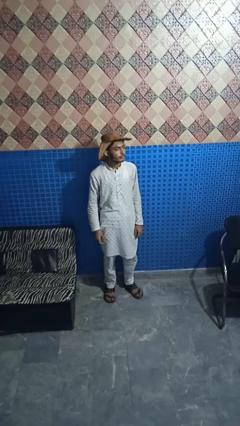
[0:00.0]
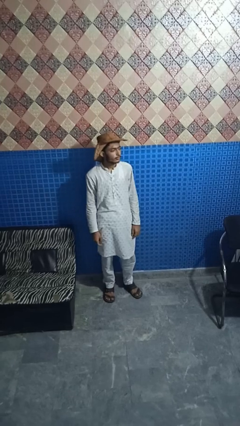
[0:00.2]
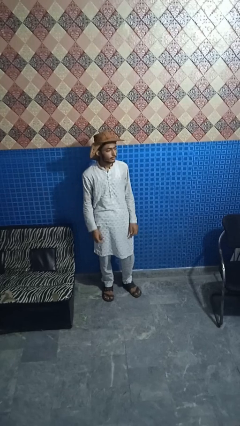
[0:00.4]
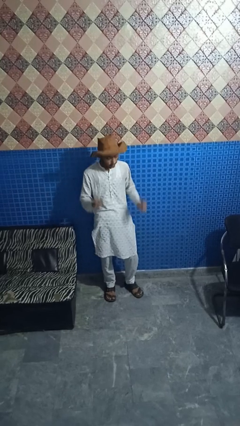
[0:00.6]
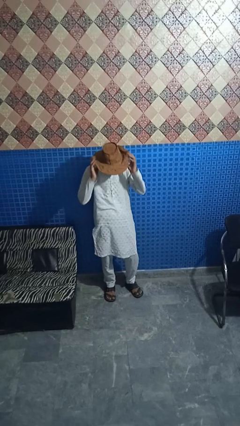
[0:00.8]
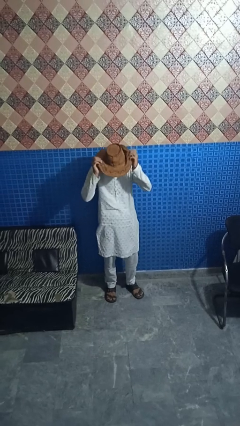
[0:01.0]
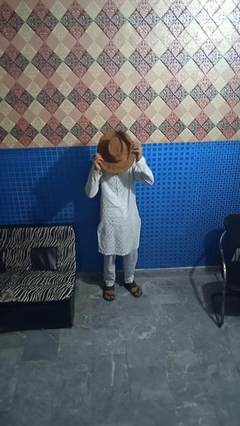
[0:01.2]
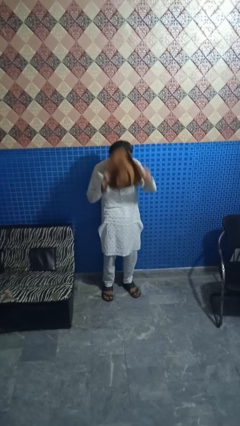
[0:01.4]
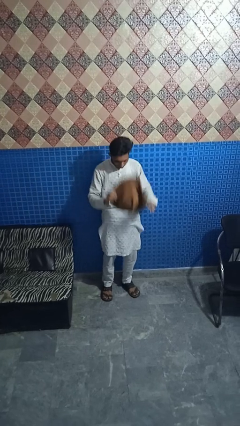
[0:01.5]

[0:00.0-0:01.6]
person takes off hat

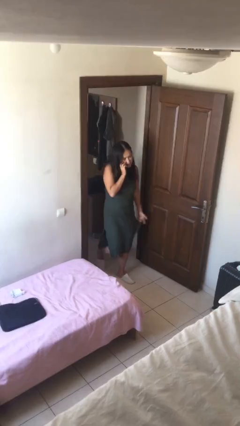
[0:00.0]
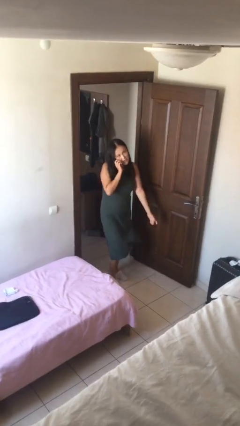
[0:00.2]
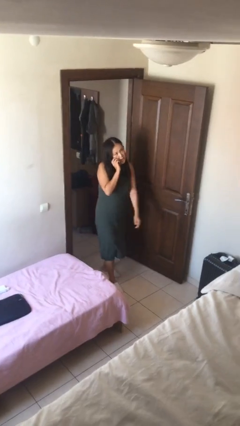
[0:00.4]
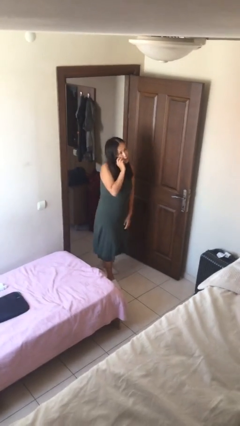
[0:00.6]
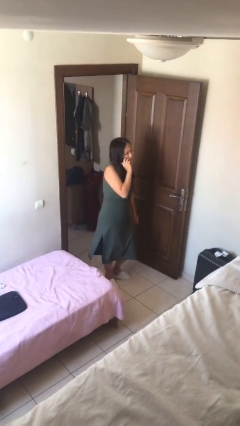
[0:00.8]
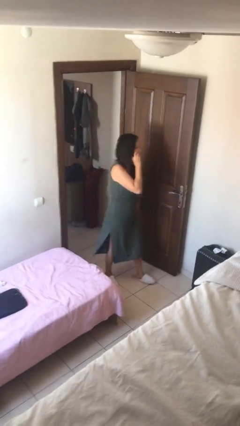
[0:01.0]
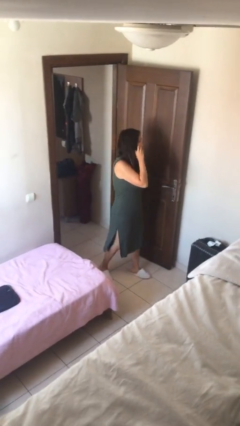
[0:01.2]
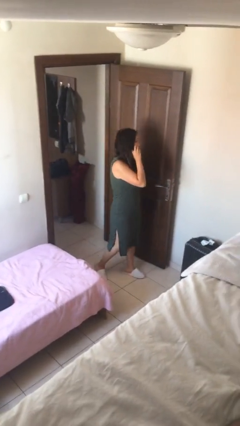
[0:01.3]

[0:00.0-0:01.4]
person enters scene through structure

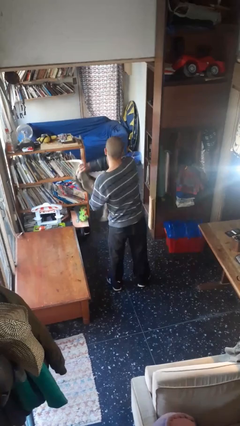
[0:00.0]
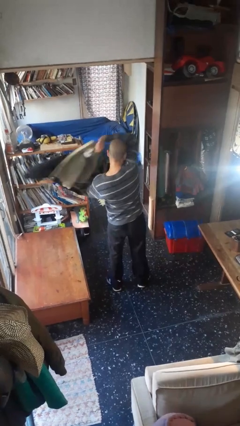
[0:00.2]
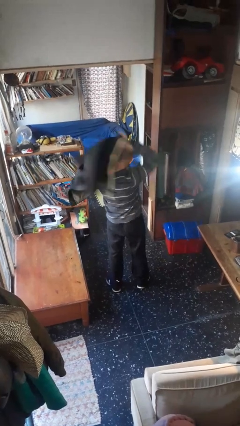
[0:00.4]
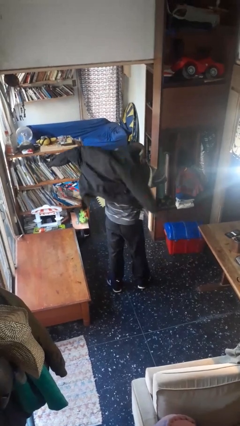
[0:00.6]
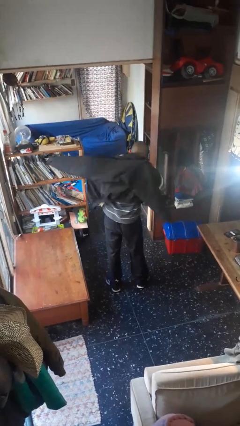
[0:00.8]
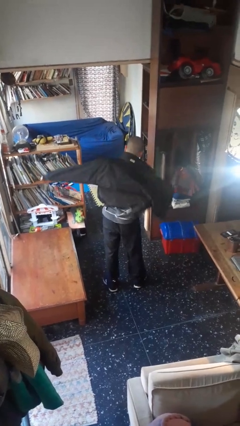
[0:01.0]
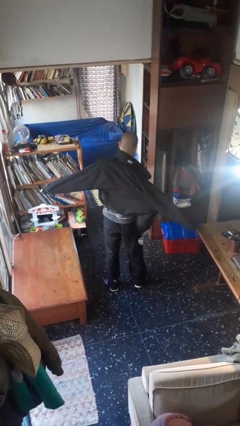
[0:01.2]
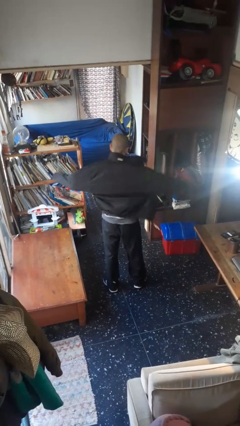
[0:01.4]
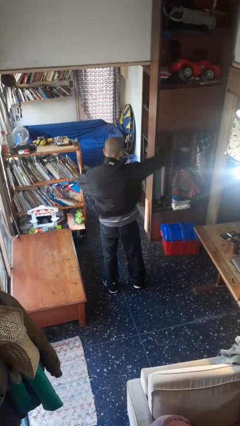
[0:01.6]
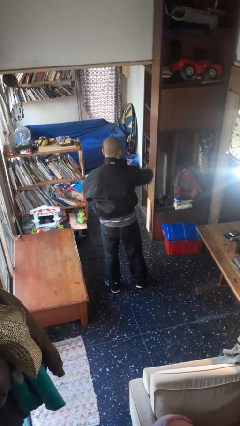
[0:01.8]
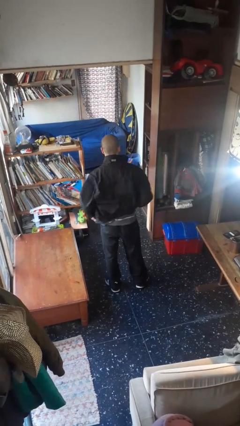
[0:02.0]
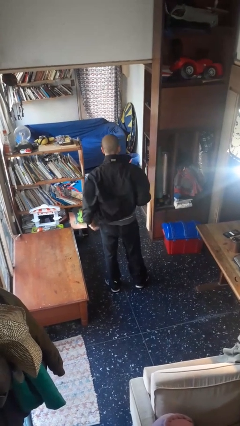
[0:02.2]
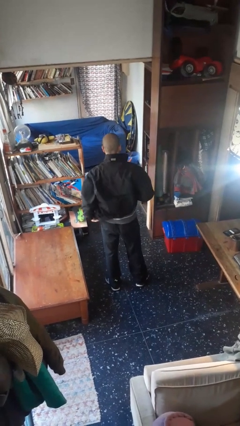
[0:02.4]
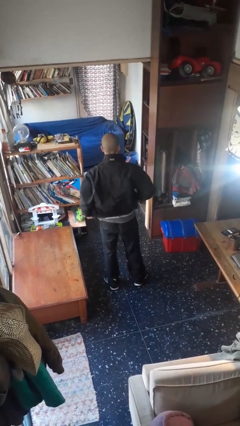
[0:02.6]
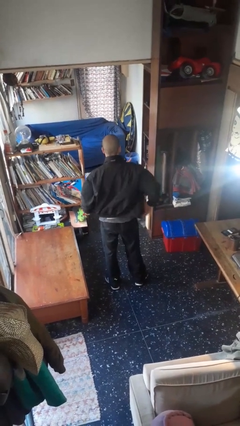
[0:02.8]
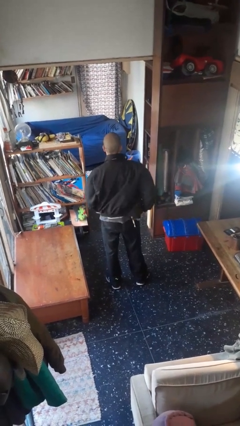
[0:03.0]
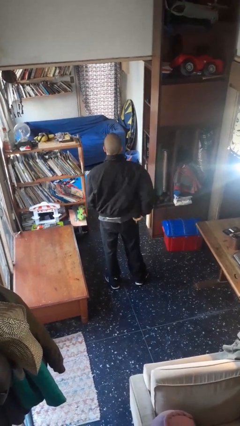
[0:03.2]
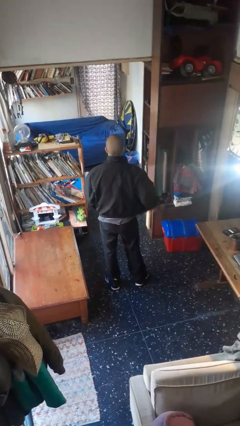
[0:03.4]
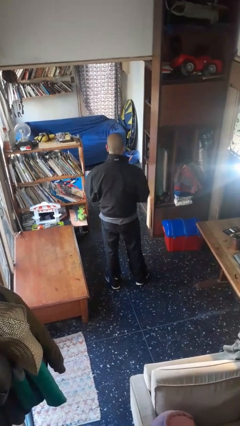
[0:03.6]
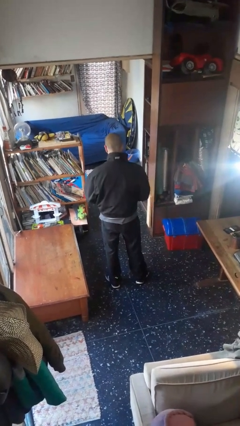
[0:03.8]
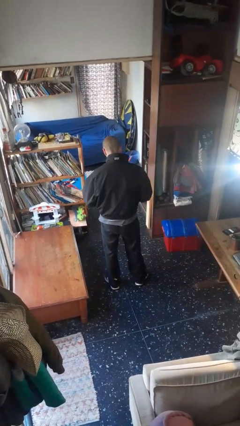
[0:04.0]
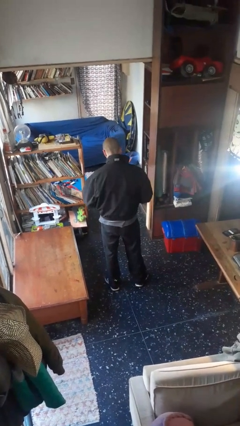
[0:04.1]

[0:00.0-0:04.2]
person puts on jacket

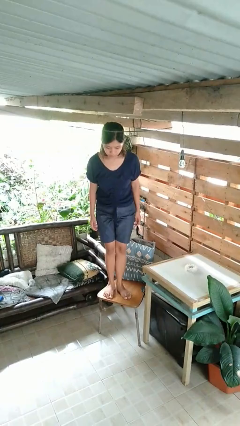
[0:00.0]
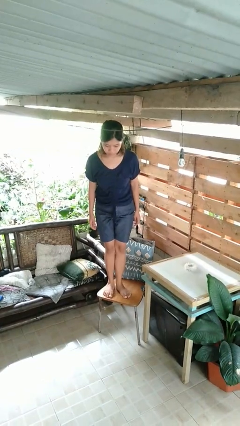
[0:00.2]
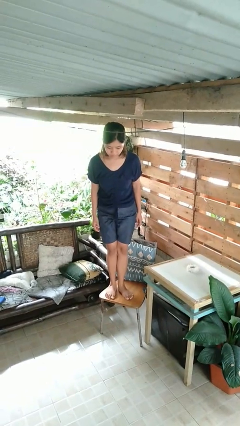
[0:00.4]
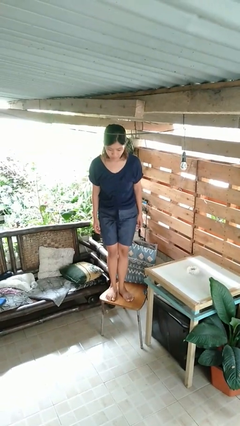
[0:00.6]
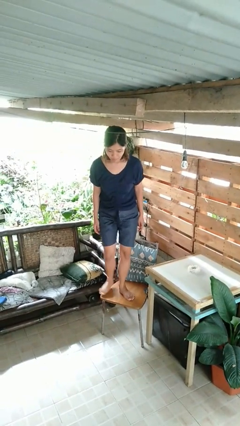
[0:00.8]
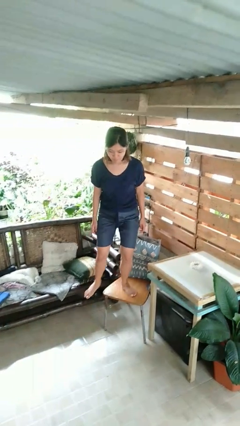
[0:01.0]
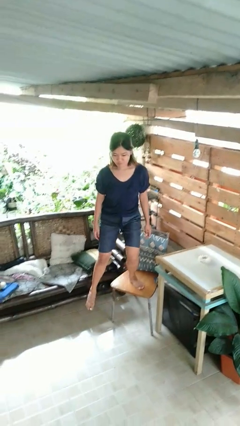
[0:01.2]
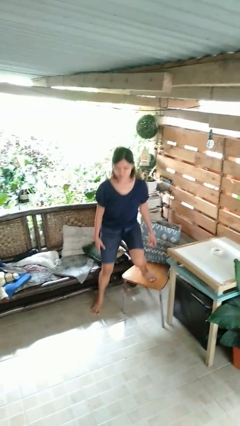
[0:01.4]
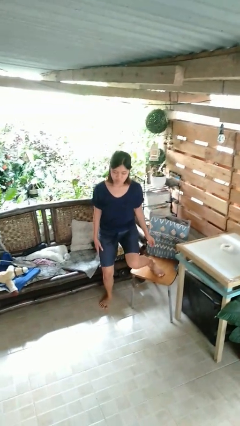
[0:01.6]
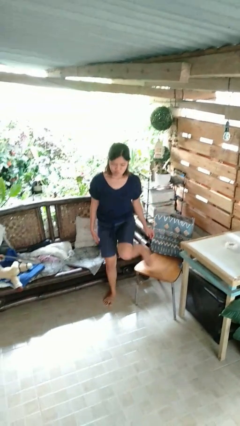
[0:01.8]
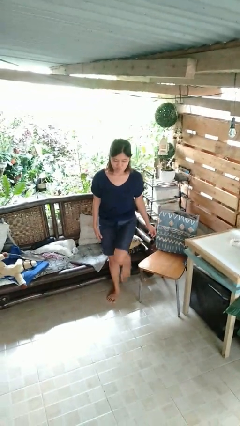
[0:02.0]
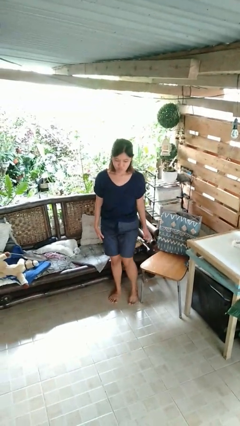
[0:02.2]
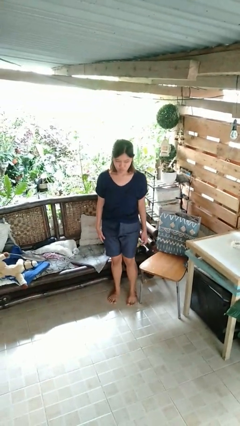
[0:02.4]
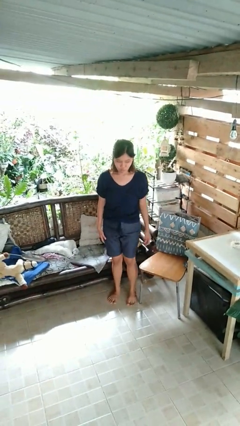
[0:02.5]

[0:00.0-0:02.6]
person climbs off chair

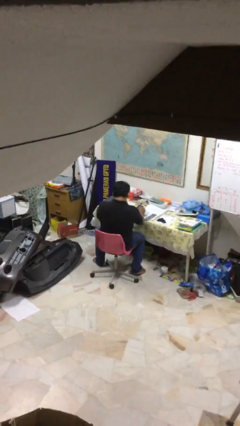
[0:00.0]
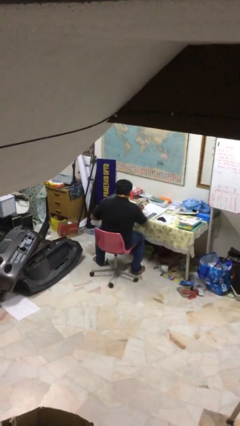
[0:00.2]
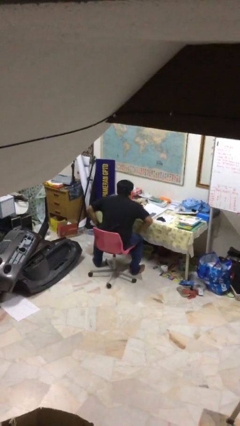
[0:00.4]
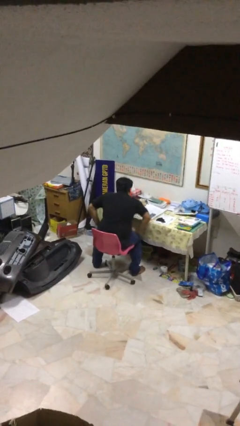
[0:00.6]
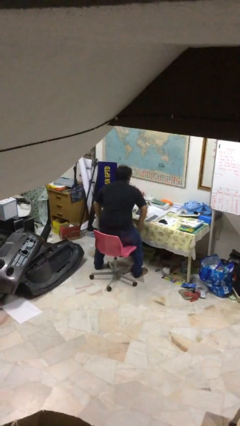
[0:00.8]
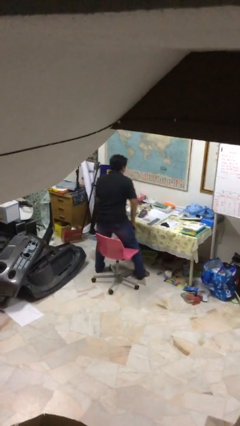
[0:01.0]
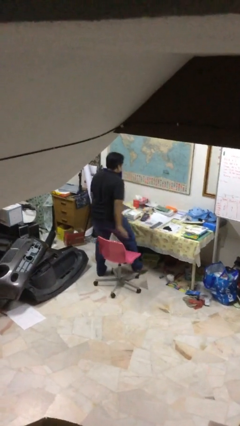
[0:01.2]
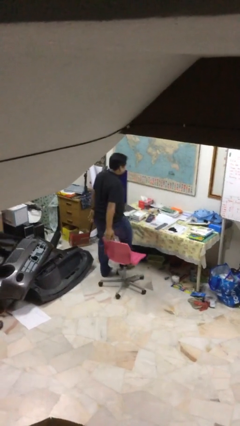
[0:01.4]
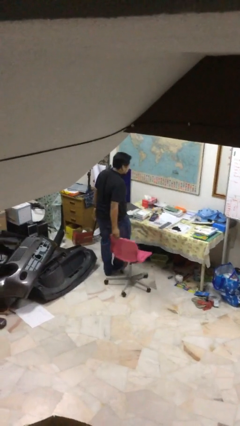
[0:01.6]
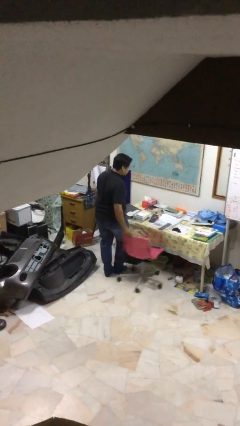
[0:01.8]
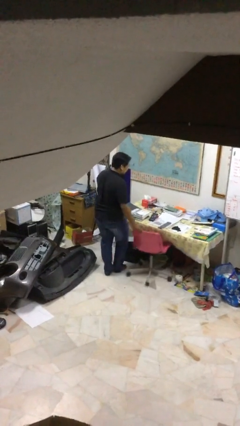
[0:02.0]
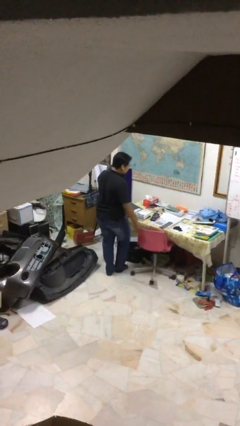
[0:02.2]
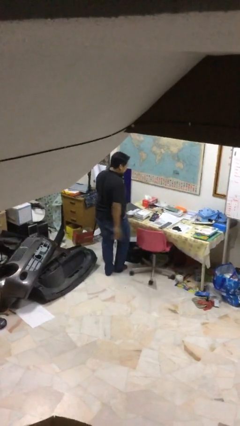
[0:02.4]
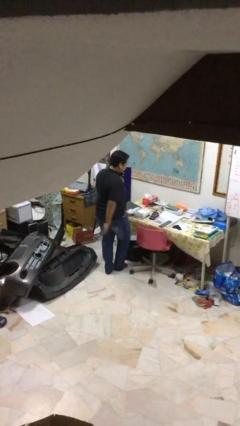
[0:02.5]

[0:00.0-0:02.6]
person stands up

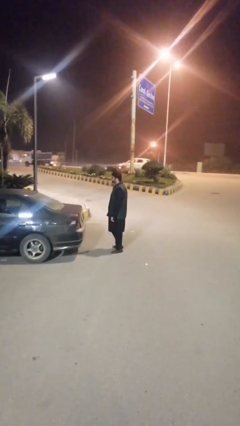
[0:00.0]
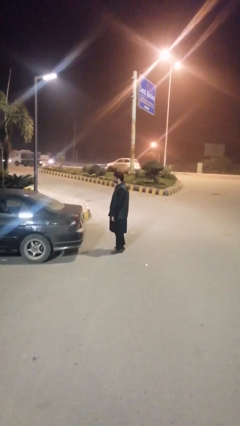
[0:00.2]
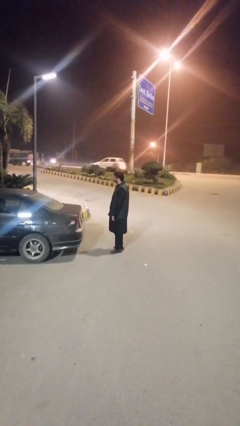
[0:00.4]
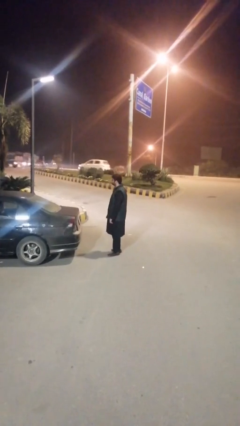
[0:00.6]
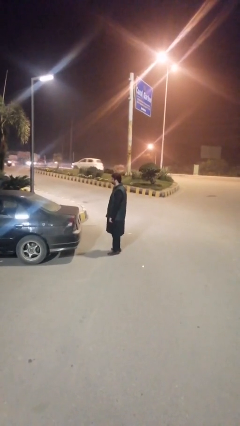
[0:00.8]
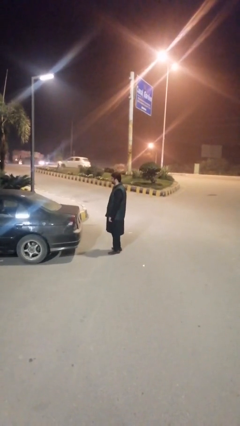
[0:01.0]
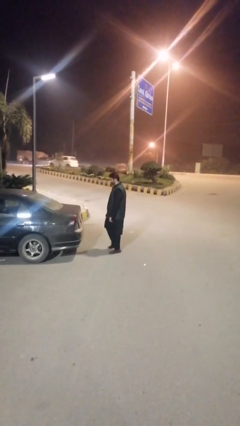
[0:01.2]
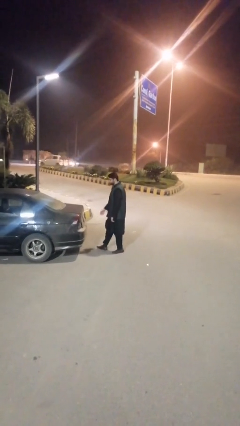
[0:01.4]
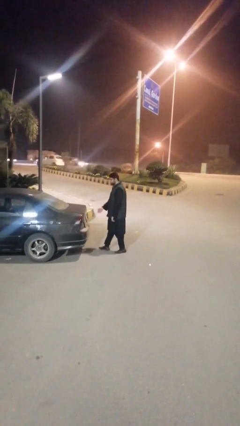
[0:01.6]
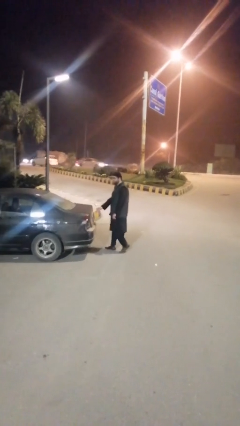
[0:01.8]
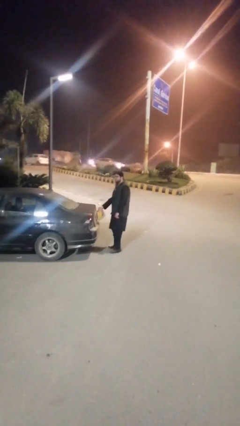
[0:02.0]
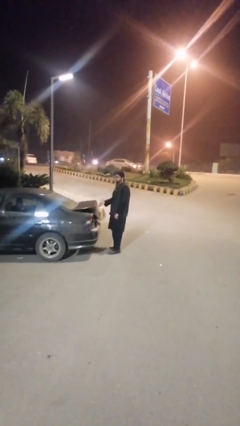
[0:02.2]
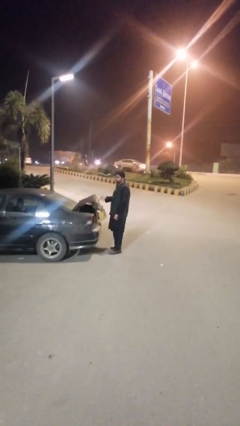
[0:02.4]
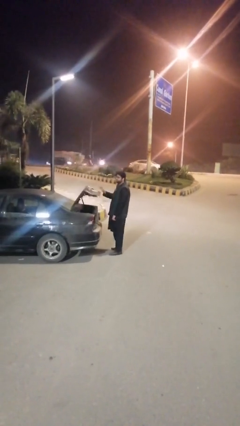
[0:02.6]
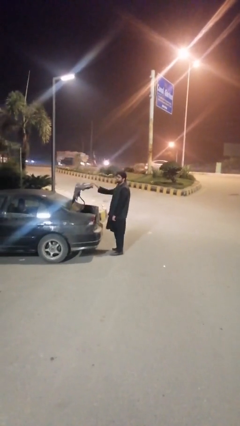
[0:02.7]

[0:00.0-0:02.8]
person closes car trunk

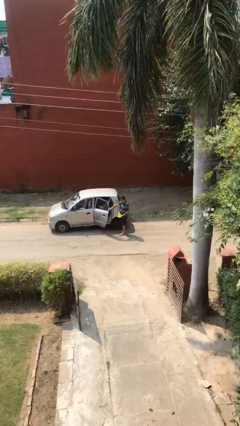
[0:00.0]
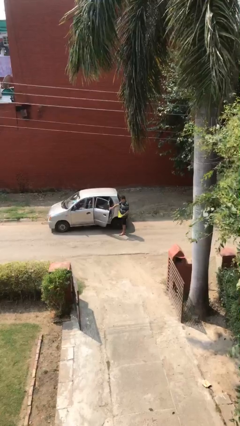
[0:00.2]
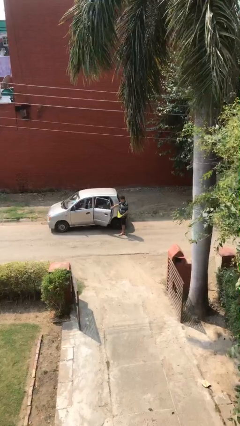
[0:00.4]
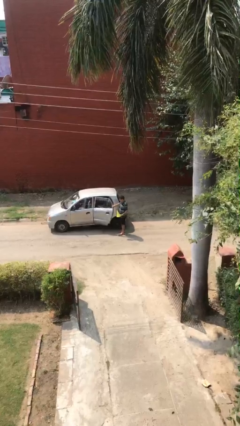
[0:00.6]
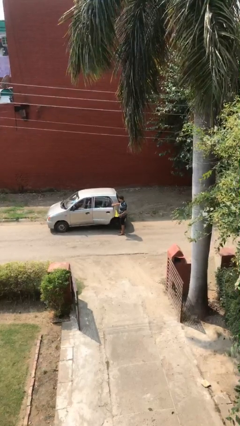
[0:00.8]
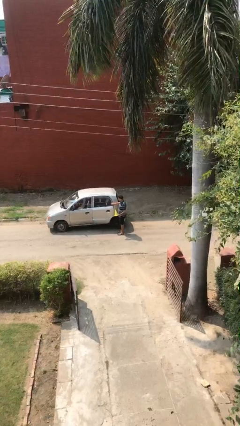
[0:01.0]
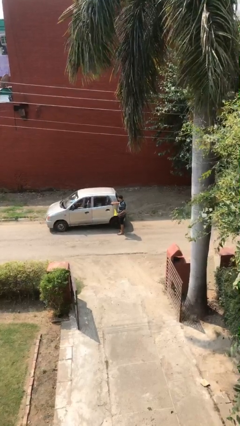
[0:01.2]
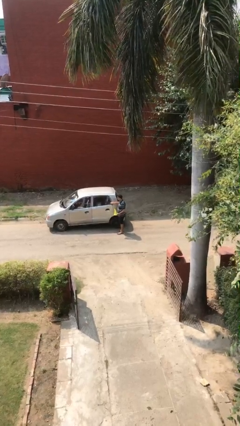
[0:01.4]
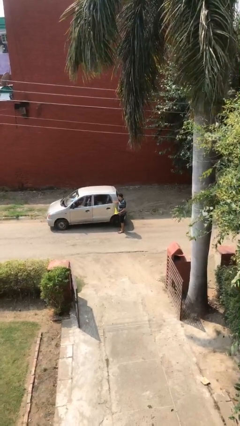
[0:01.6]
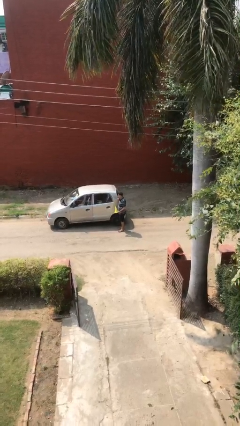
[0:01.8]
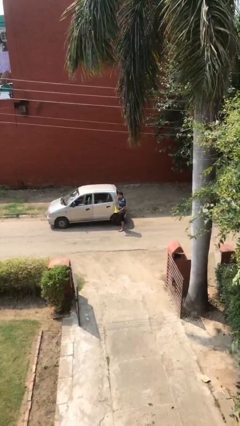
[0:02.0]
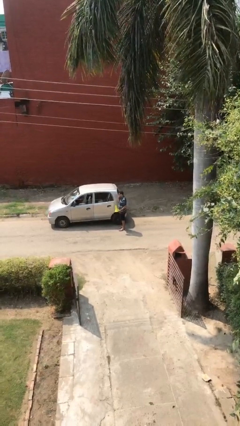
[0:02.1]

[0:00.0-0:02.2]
person closes car door
